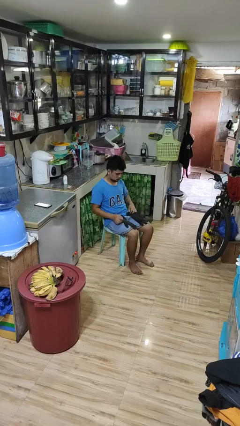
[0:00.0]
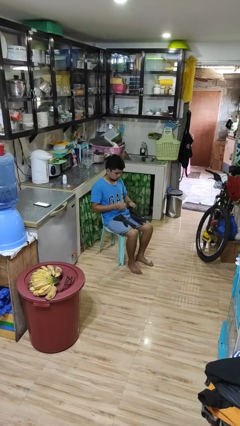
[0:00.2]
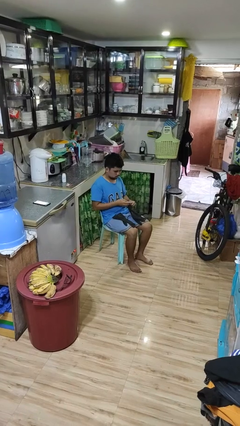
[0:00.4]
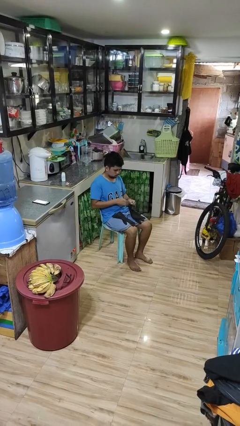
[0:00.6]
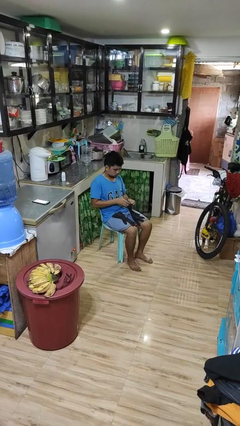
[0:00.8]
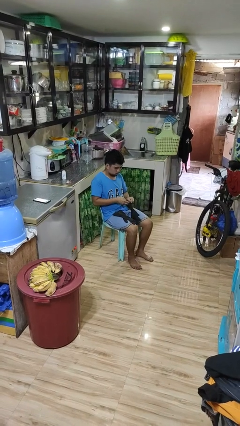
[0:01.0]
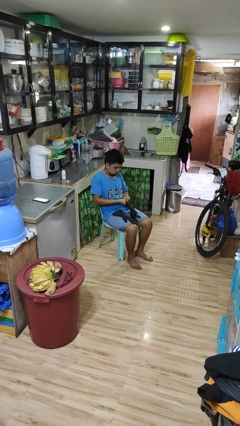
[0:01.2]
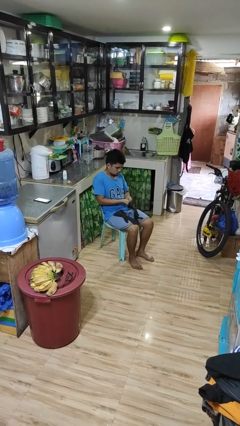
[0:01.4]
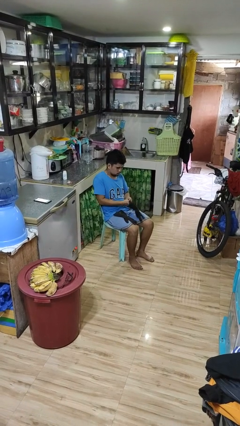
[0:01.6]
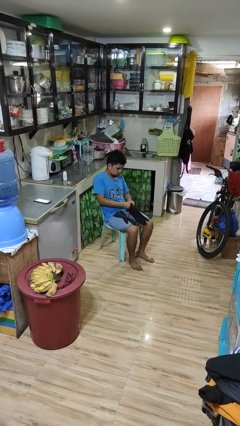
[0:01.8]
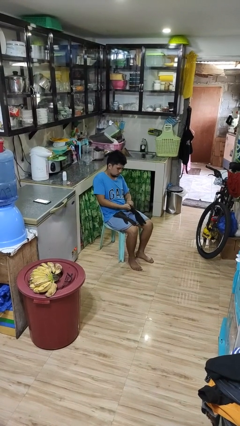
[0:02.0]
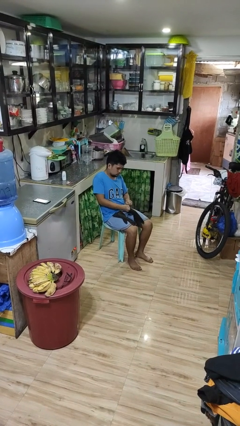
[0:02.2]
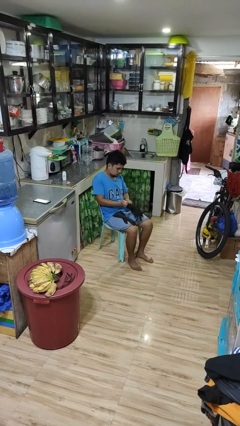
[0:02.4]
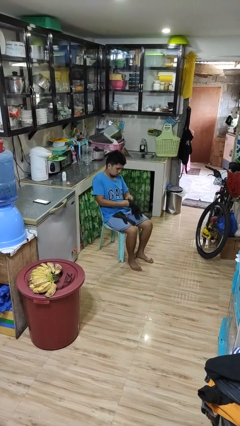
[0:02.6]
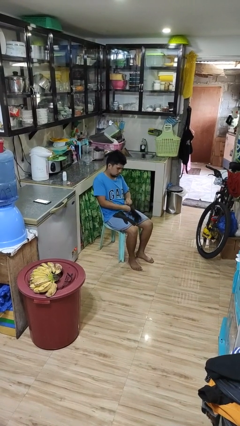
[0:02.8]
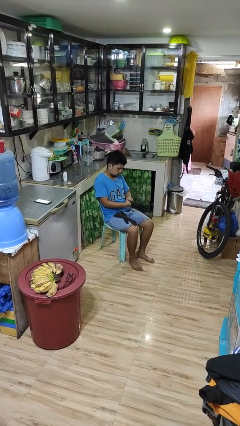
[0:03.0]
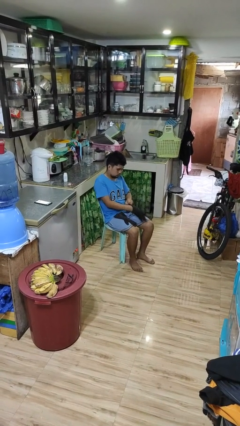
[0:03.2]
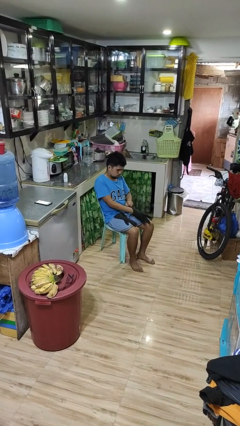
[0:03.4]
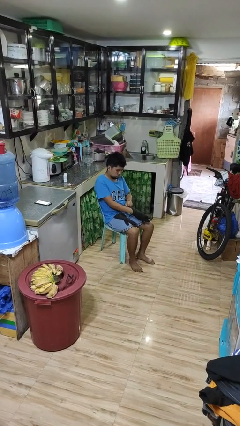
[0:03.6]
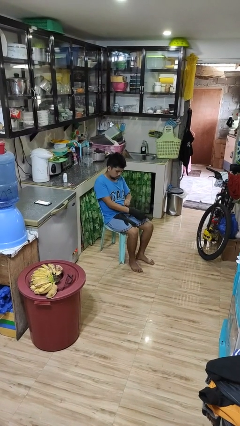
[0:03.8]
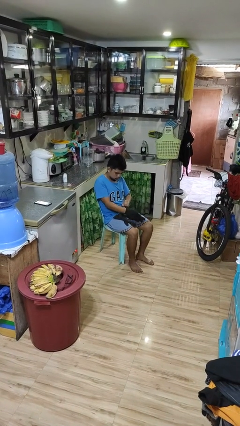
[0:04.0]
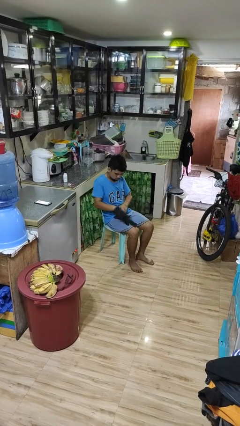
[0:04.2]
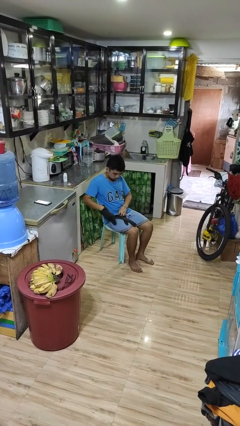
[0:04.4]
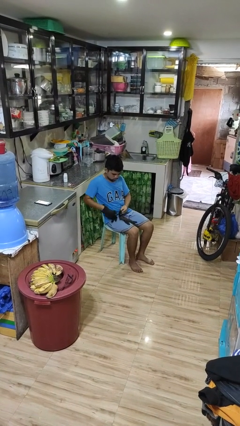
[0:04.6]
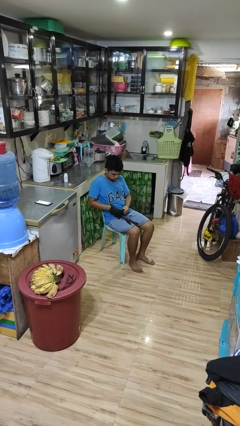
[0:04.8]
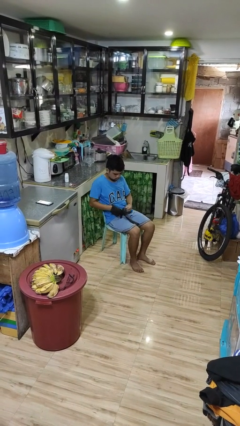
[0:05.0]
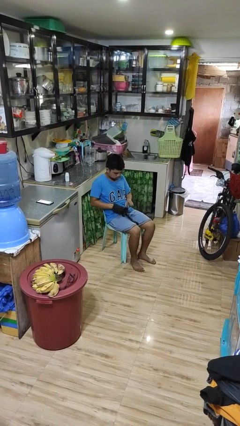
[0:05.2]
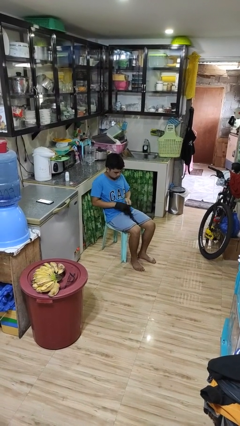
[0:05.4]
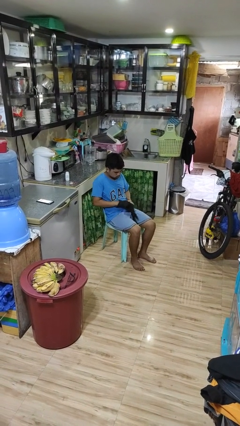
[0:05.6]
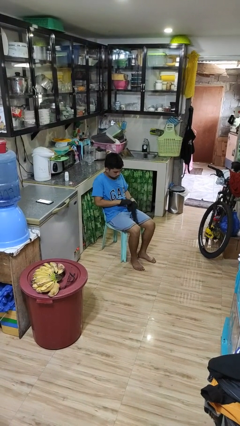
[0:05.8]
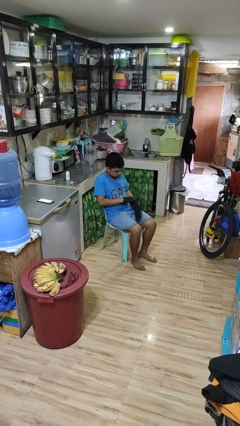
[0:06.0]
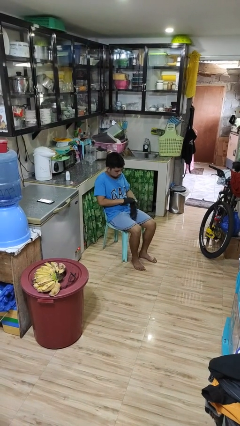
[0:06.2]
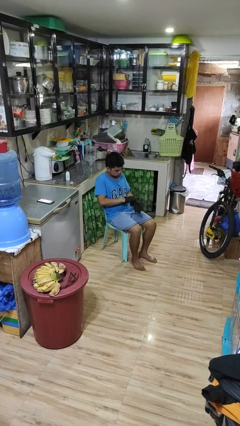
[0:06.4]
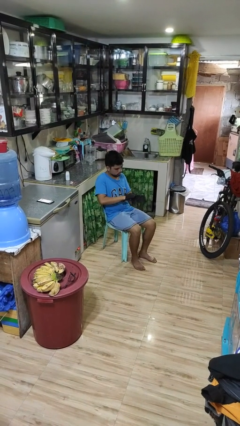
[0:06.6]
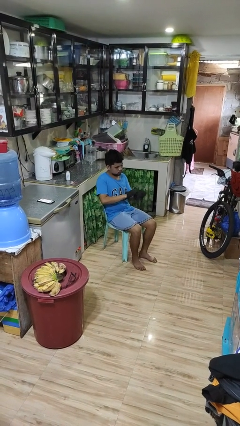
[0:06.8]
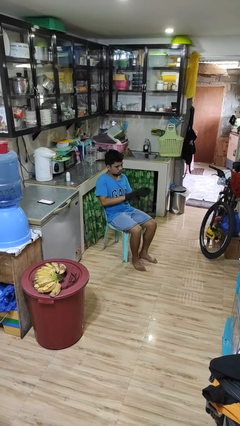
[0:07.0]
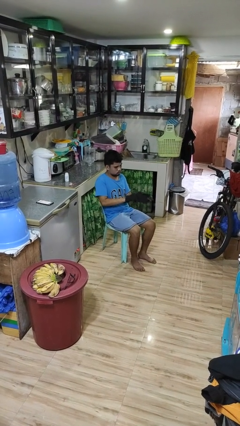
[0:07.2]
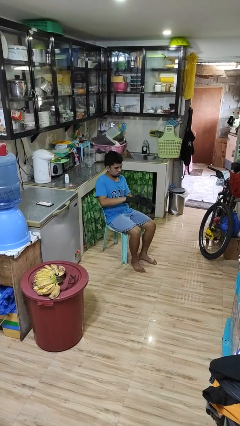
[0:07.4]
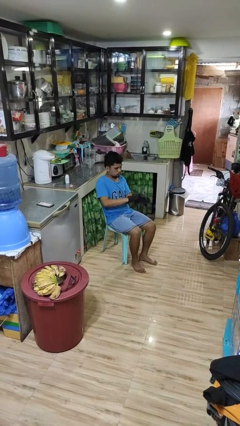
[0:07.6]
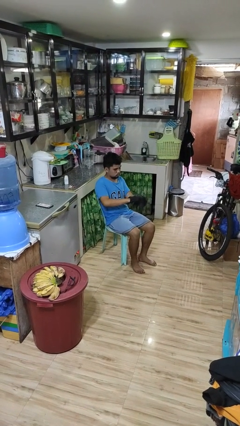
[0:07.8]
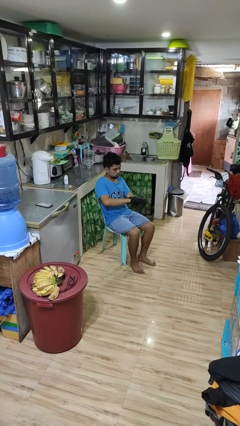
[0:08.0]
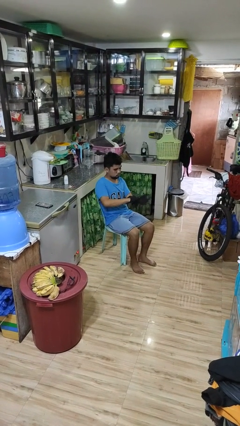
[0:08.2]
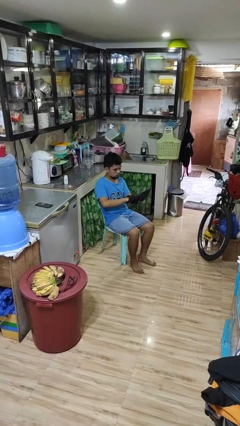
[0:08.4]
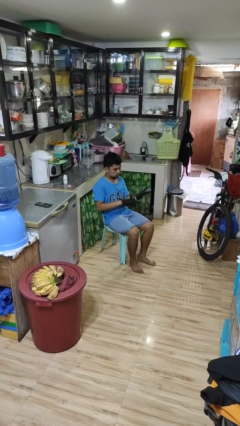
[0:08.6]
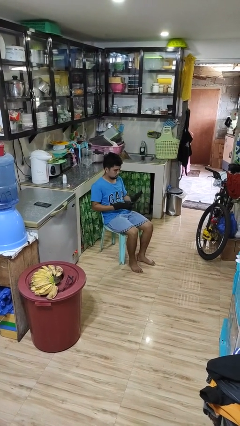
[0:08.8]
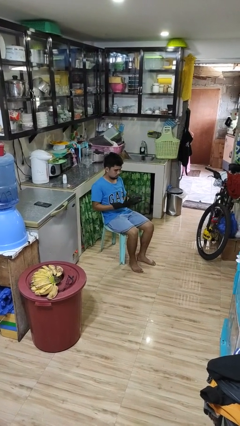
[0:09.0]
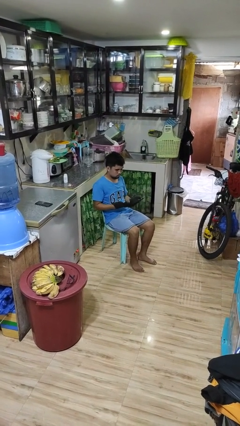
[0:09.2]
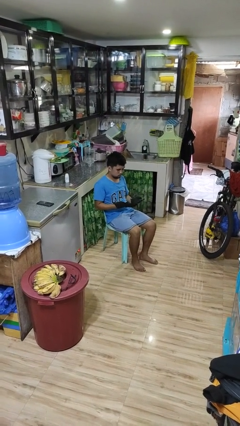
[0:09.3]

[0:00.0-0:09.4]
person puts on gloves

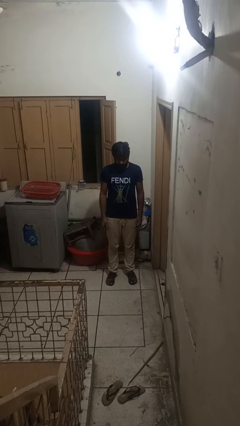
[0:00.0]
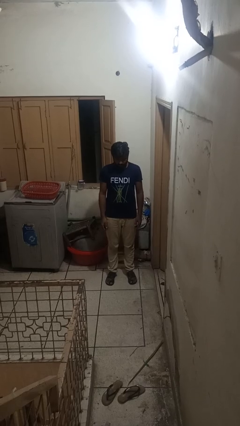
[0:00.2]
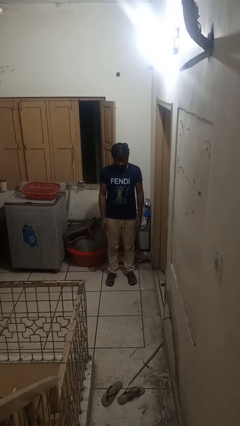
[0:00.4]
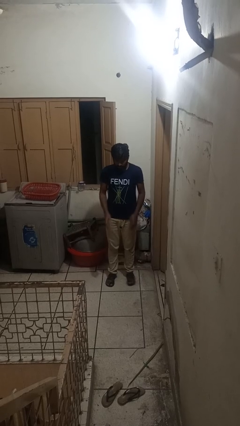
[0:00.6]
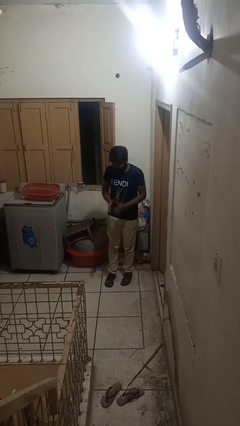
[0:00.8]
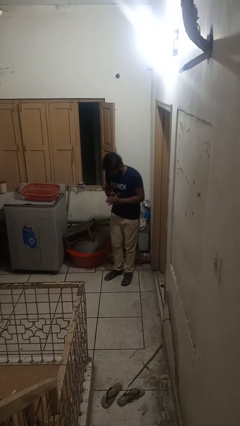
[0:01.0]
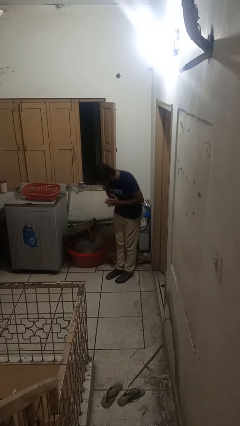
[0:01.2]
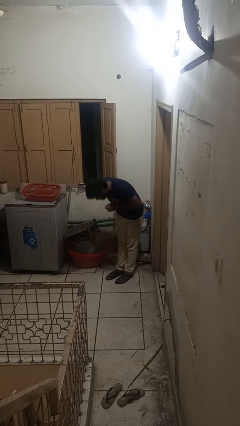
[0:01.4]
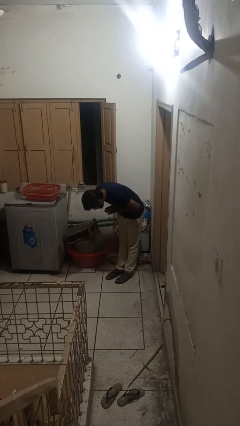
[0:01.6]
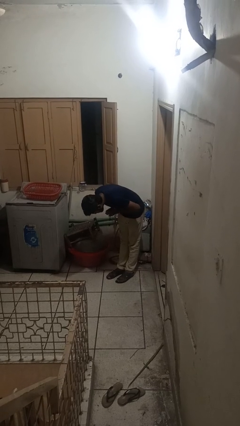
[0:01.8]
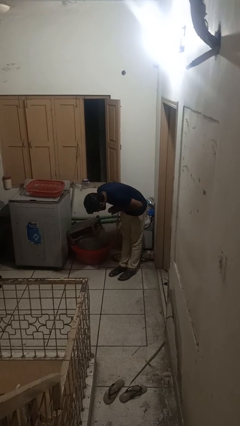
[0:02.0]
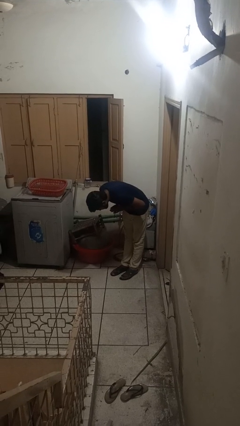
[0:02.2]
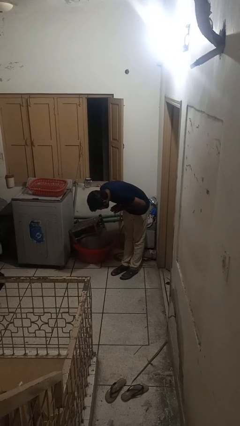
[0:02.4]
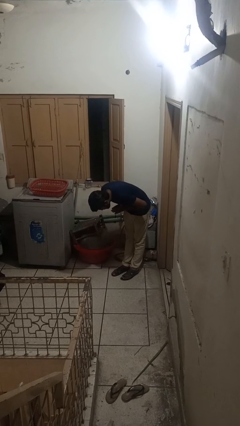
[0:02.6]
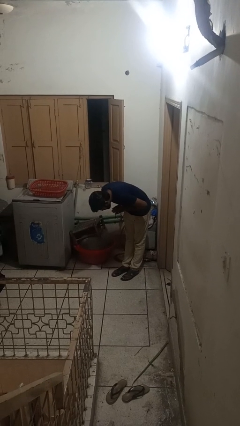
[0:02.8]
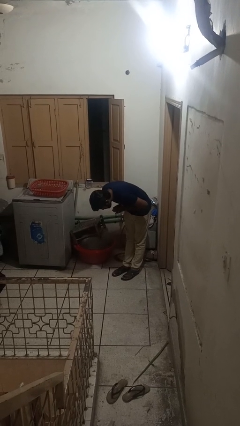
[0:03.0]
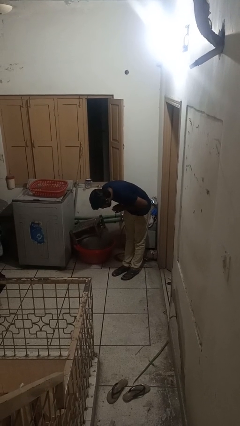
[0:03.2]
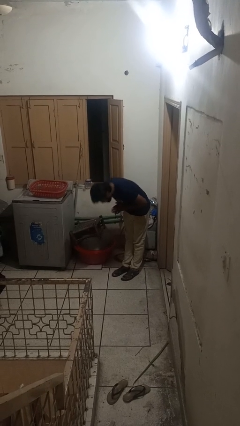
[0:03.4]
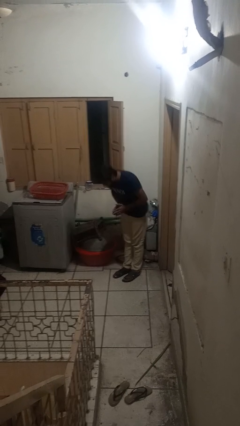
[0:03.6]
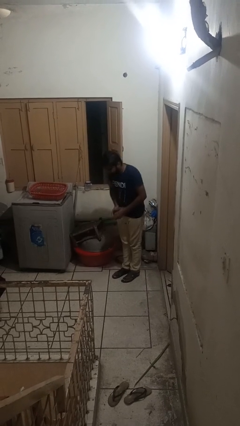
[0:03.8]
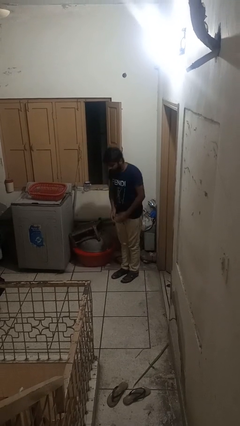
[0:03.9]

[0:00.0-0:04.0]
person bows

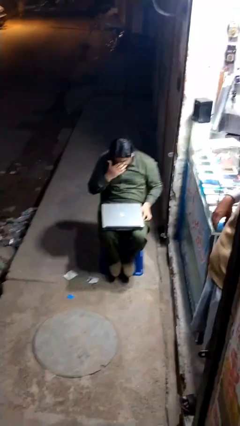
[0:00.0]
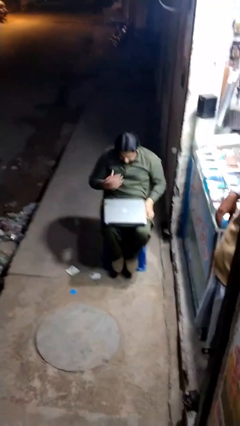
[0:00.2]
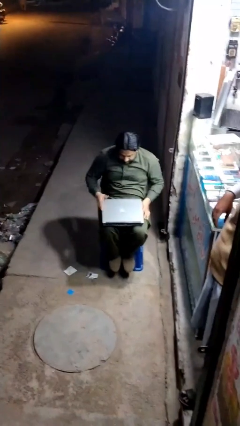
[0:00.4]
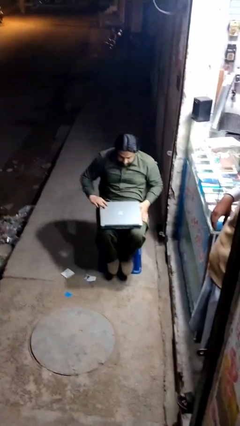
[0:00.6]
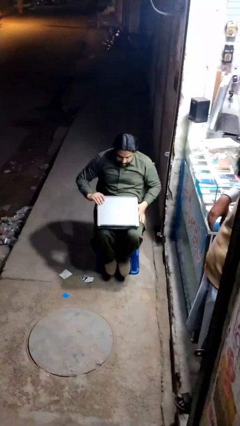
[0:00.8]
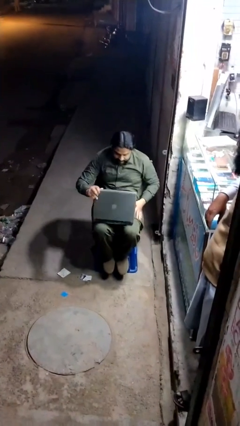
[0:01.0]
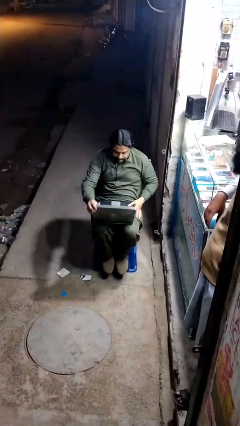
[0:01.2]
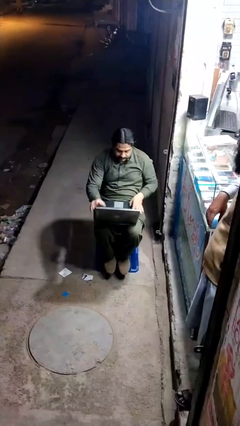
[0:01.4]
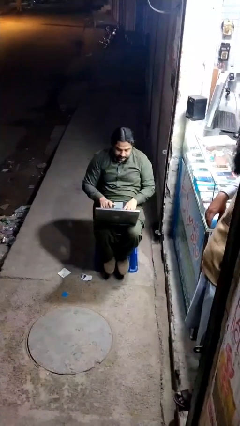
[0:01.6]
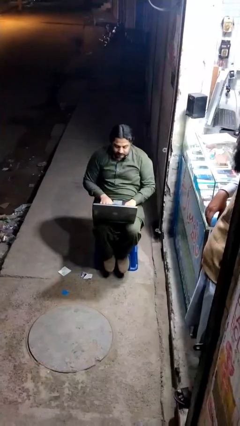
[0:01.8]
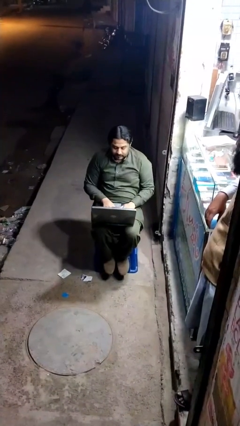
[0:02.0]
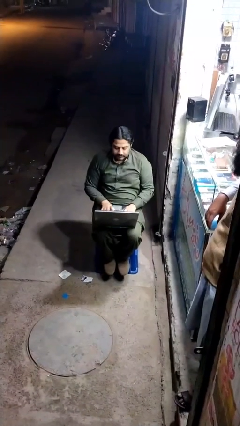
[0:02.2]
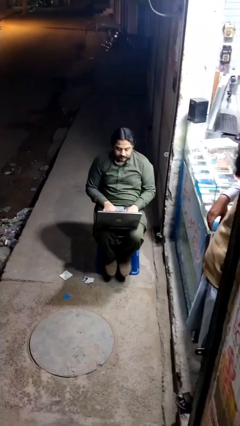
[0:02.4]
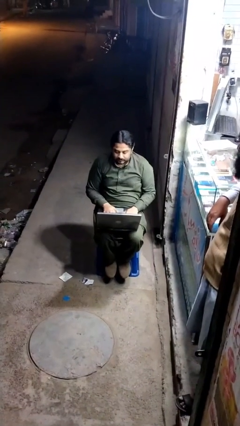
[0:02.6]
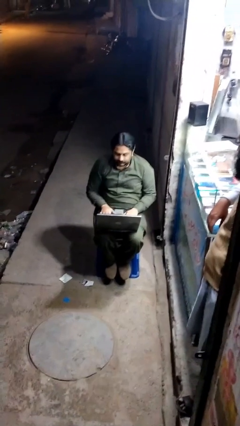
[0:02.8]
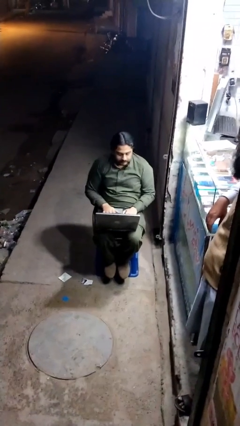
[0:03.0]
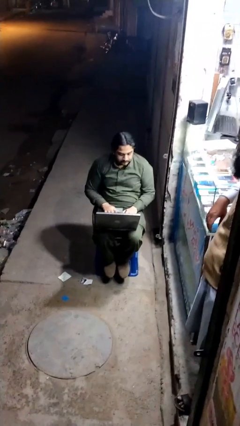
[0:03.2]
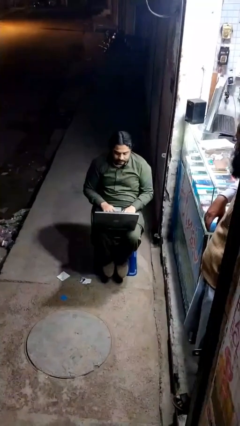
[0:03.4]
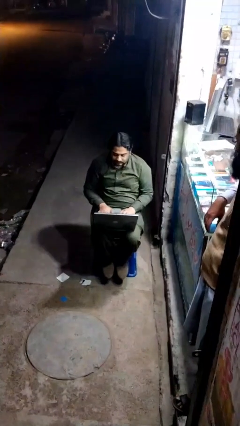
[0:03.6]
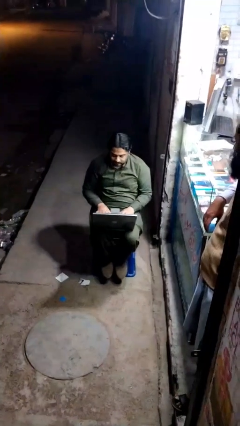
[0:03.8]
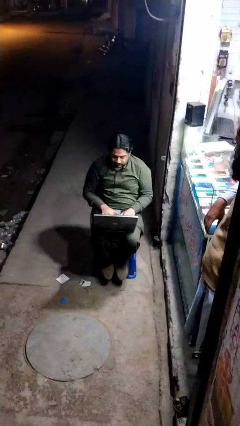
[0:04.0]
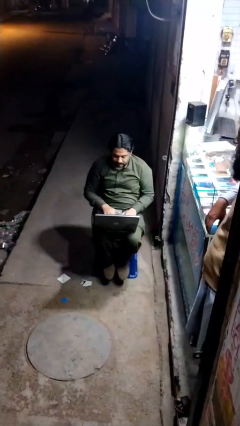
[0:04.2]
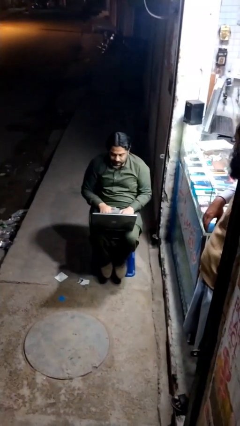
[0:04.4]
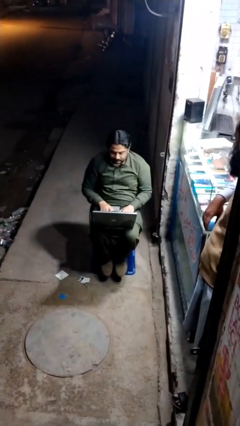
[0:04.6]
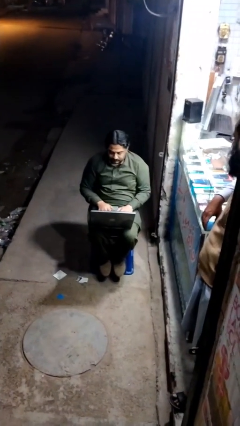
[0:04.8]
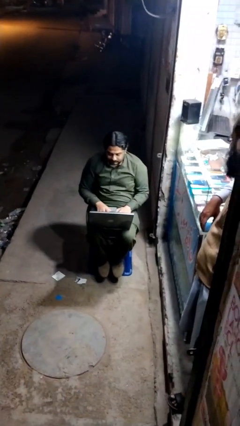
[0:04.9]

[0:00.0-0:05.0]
person interacts with laptop
